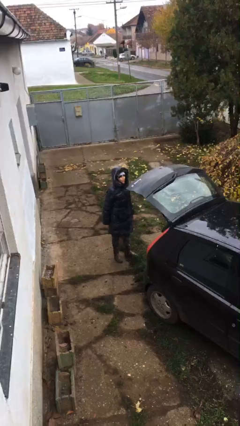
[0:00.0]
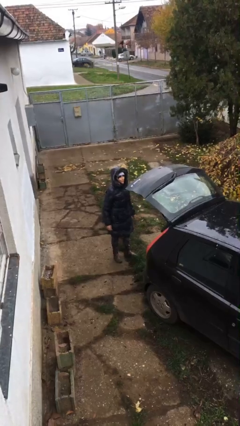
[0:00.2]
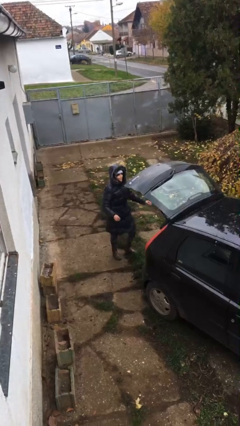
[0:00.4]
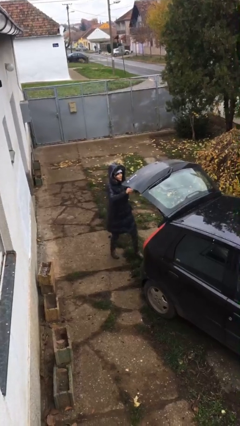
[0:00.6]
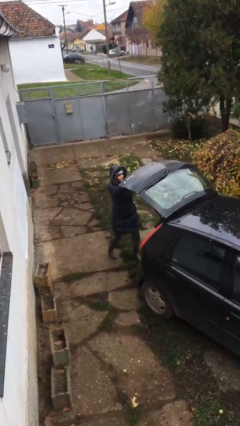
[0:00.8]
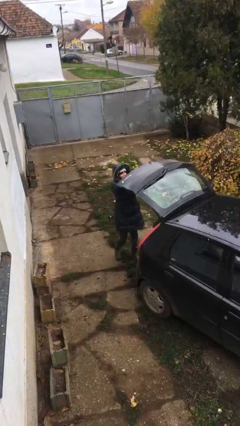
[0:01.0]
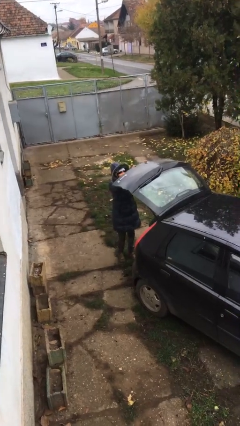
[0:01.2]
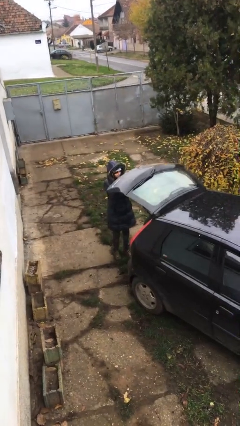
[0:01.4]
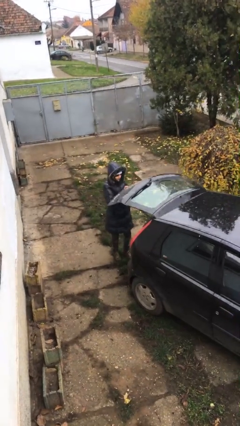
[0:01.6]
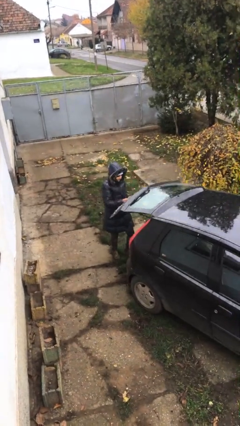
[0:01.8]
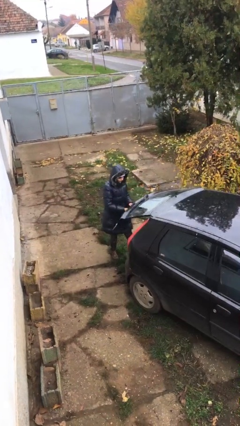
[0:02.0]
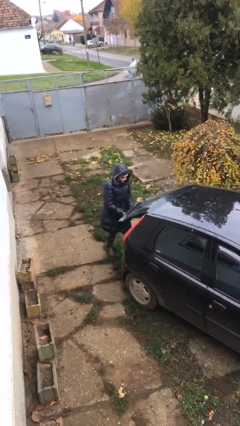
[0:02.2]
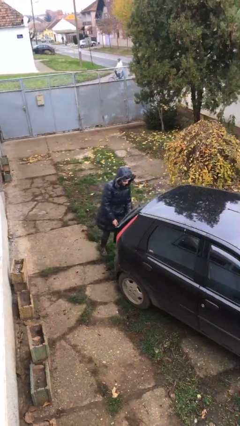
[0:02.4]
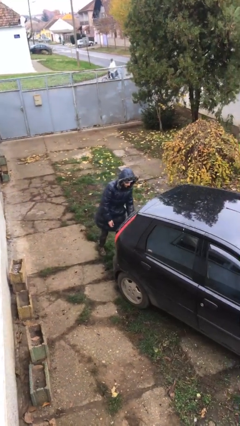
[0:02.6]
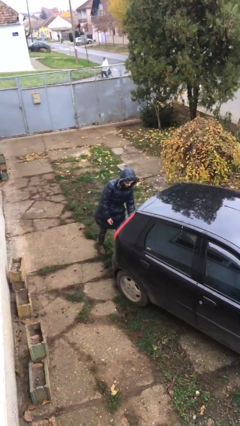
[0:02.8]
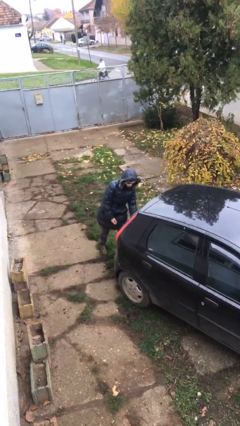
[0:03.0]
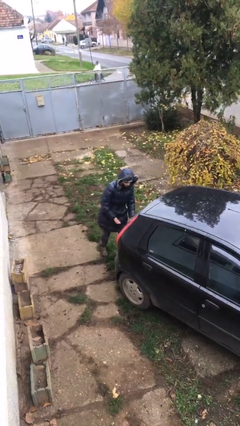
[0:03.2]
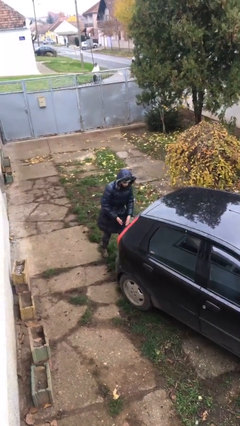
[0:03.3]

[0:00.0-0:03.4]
person closes car trunk

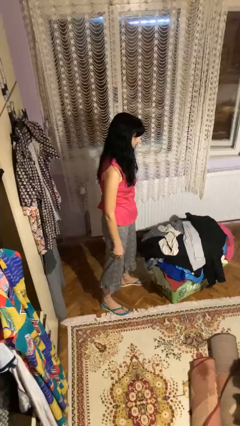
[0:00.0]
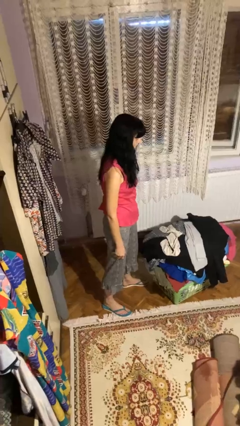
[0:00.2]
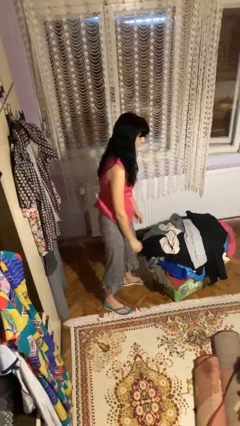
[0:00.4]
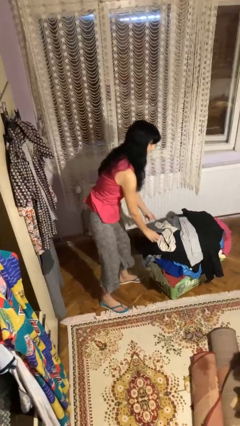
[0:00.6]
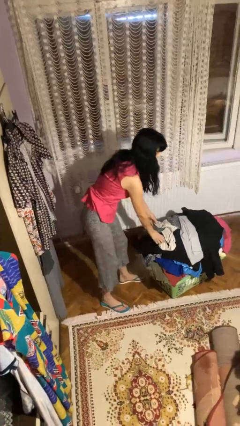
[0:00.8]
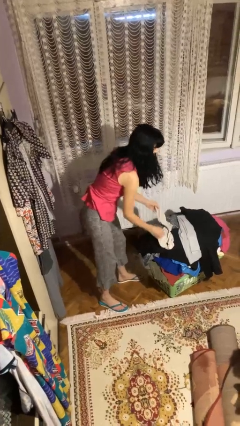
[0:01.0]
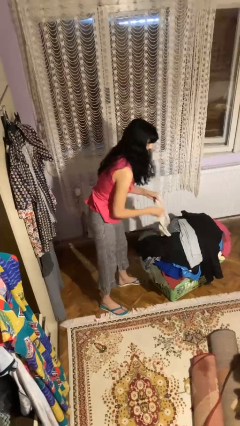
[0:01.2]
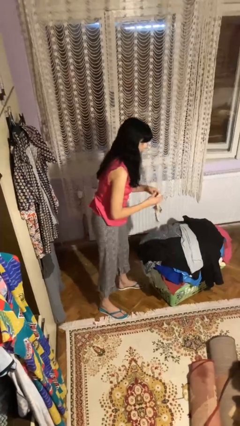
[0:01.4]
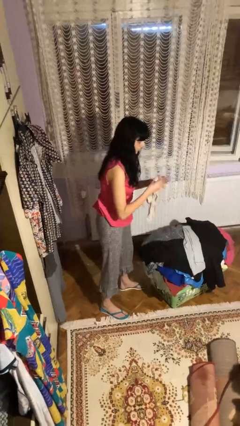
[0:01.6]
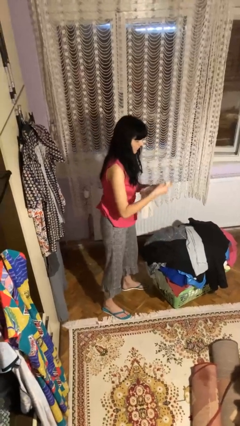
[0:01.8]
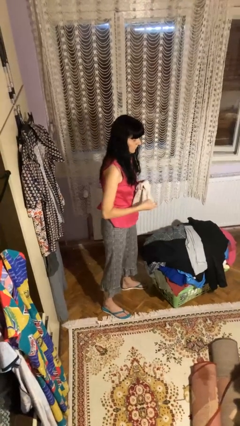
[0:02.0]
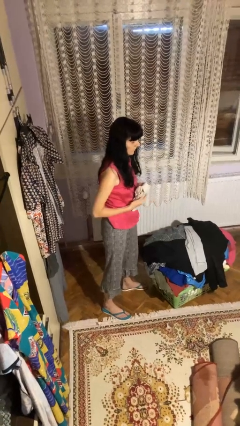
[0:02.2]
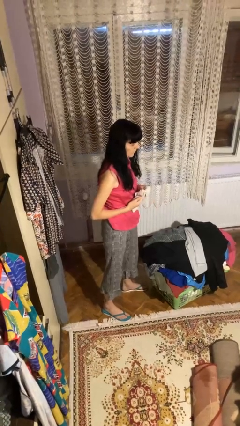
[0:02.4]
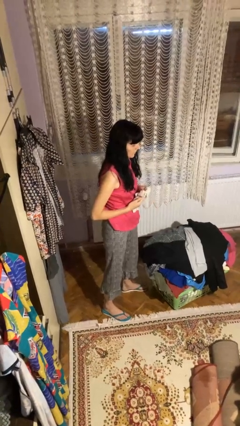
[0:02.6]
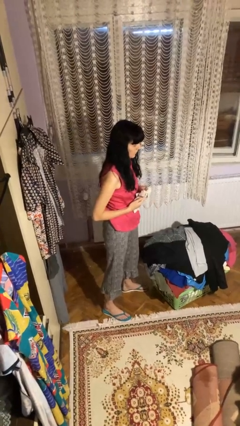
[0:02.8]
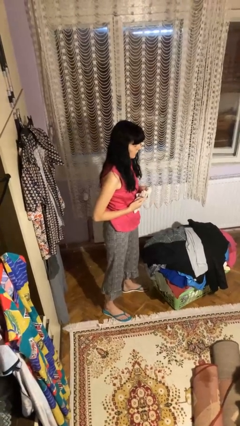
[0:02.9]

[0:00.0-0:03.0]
person folds socks

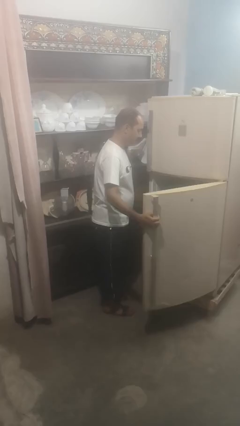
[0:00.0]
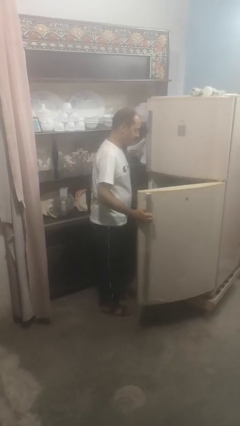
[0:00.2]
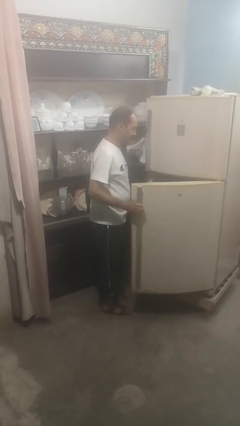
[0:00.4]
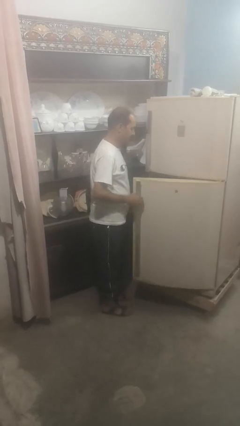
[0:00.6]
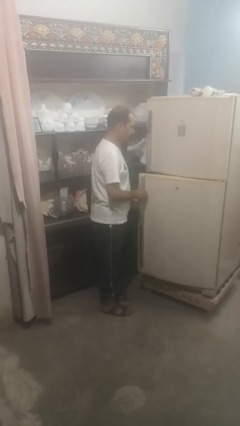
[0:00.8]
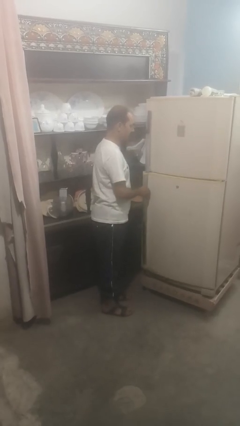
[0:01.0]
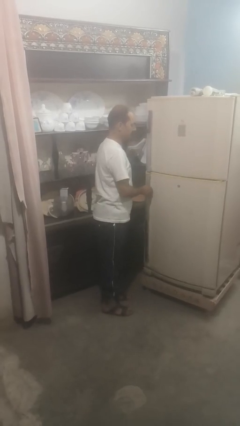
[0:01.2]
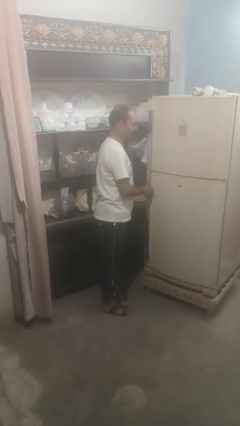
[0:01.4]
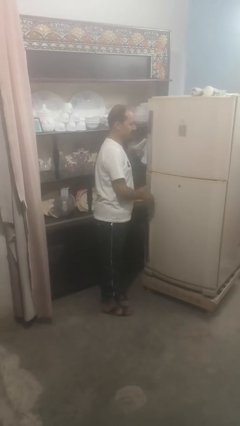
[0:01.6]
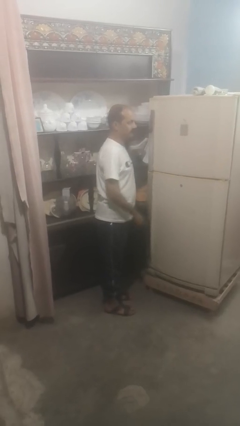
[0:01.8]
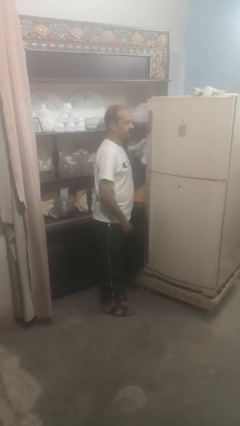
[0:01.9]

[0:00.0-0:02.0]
person closes refrigerator

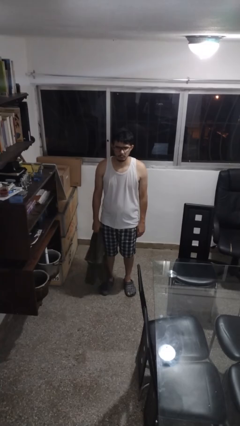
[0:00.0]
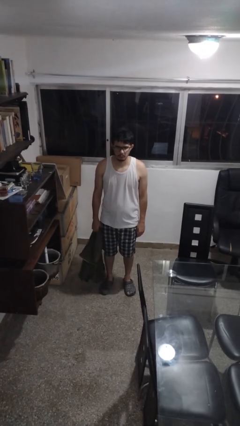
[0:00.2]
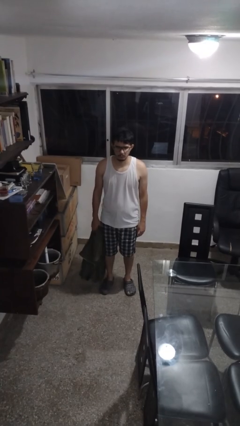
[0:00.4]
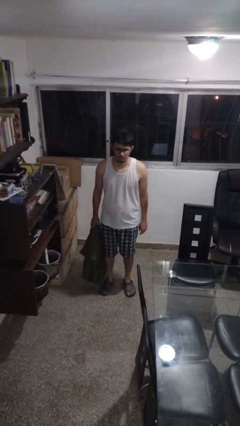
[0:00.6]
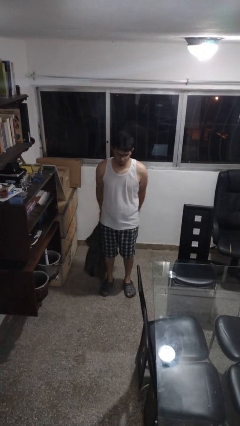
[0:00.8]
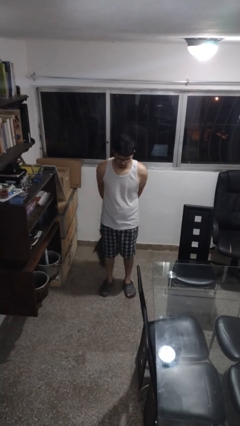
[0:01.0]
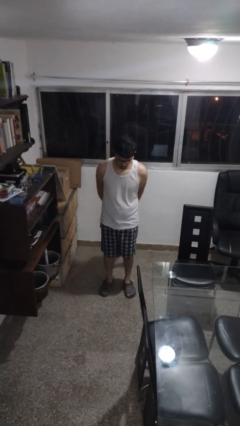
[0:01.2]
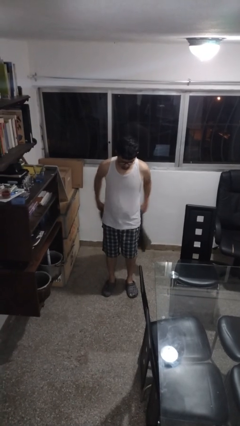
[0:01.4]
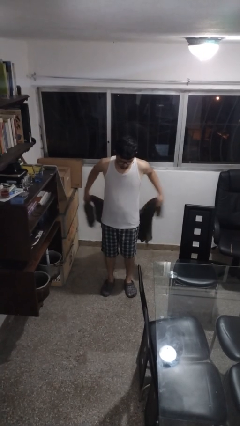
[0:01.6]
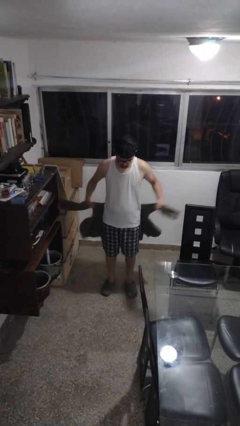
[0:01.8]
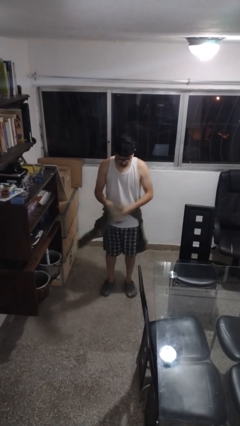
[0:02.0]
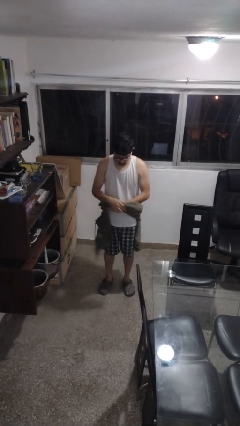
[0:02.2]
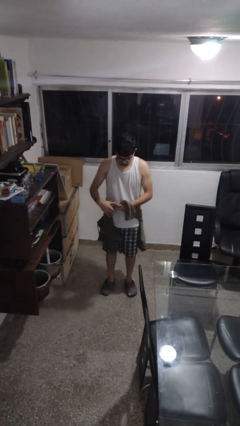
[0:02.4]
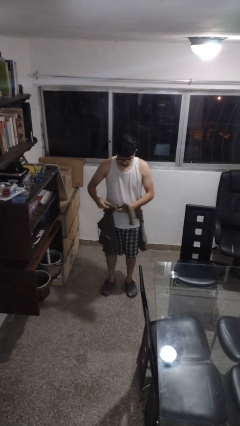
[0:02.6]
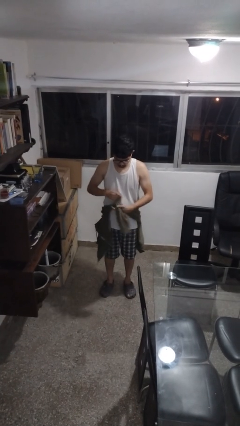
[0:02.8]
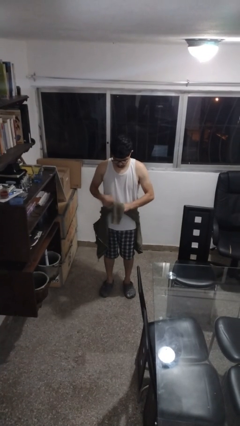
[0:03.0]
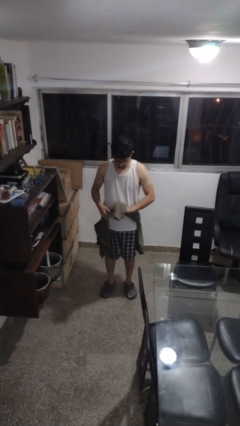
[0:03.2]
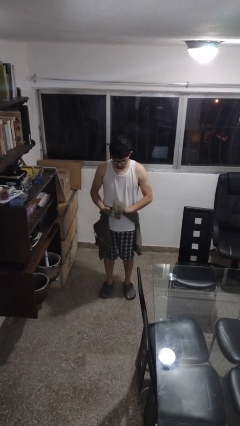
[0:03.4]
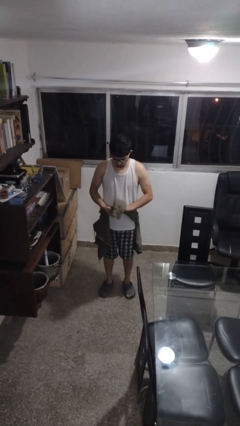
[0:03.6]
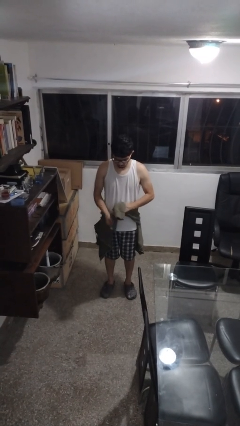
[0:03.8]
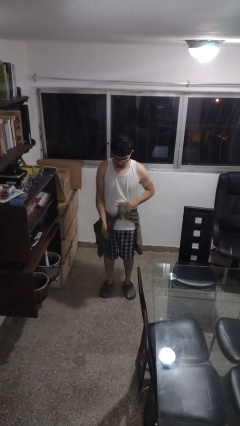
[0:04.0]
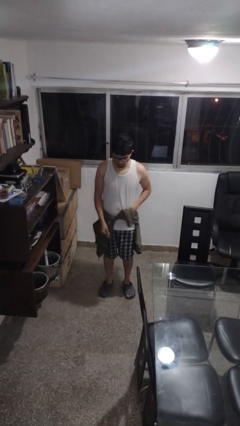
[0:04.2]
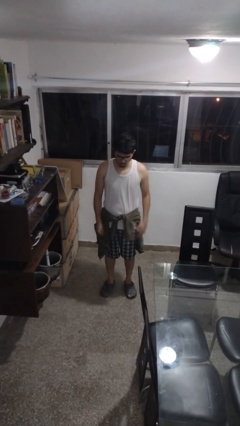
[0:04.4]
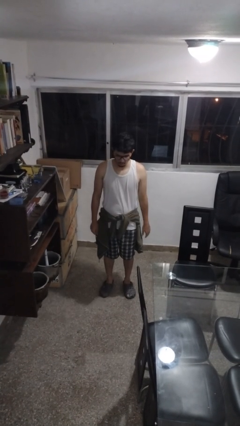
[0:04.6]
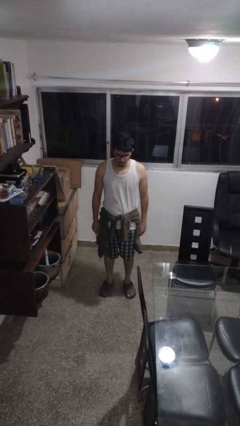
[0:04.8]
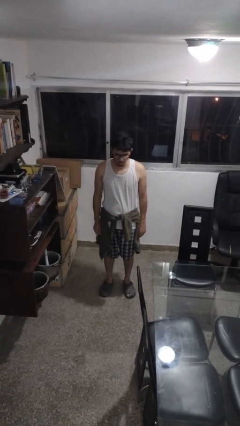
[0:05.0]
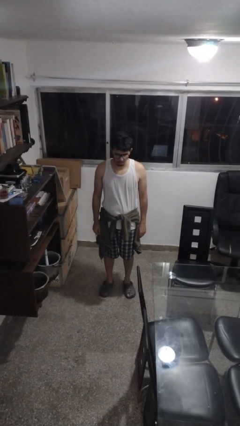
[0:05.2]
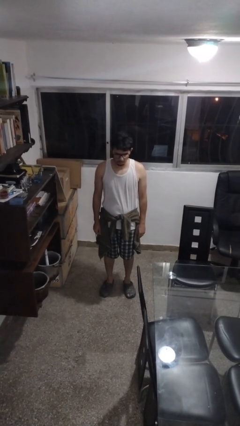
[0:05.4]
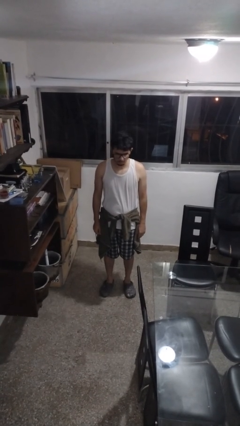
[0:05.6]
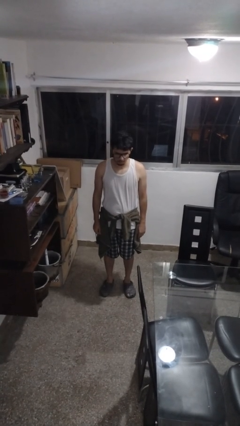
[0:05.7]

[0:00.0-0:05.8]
person ties jacket around waist

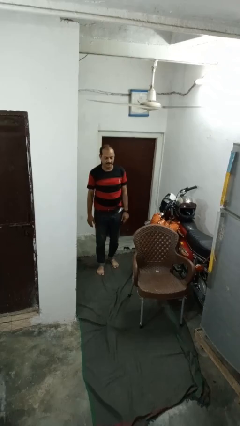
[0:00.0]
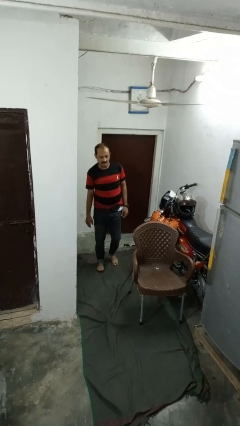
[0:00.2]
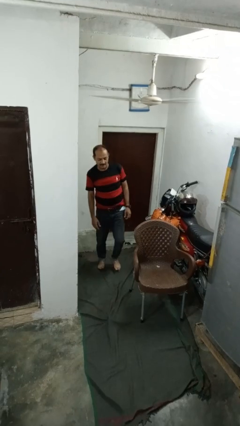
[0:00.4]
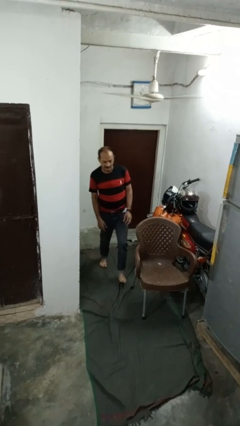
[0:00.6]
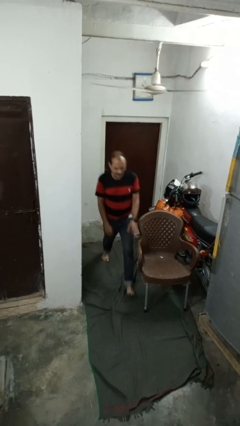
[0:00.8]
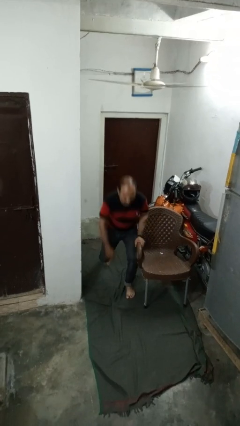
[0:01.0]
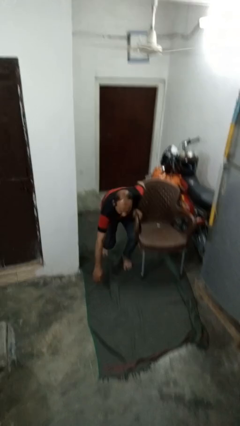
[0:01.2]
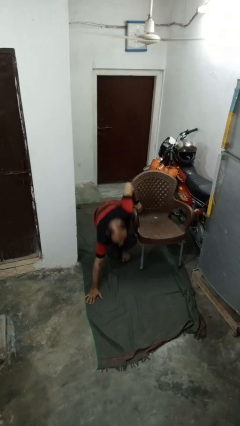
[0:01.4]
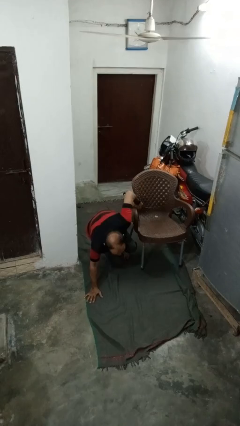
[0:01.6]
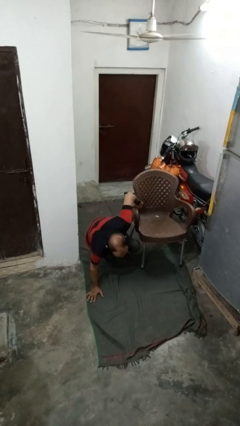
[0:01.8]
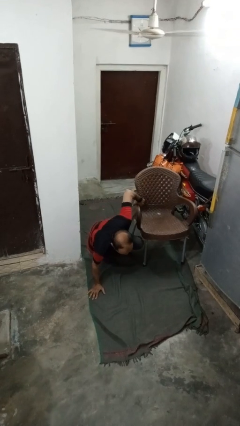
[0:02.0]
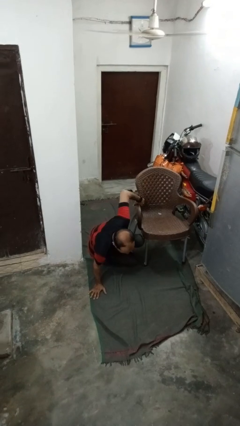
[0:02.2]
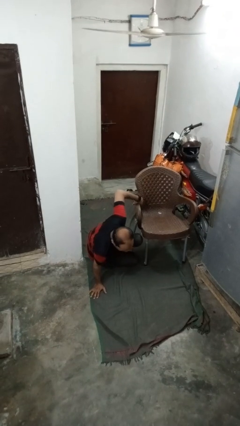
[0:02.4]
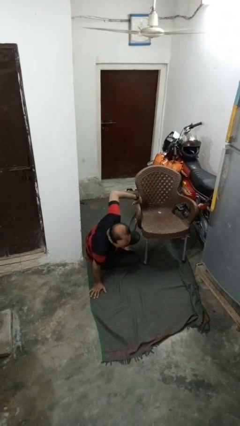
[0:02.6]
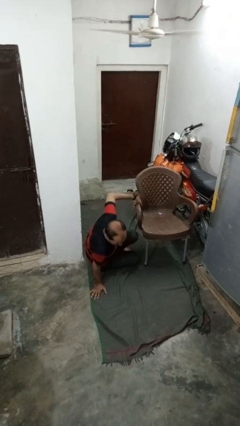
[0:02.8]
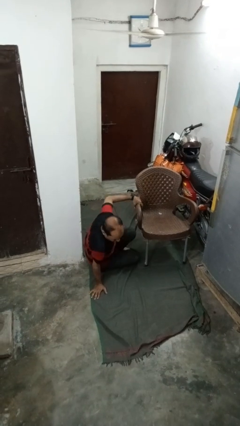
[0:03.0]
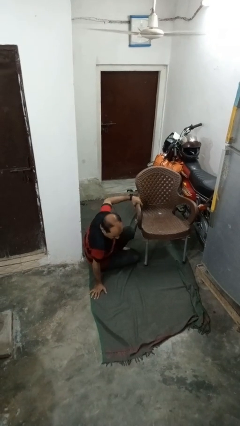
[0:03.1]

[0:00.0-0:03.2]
person trips on object on floor

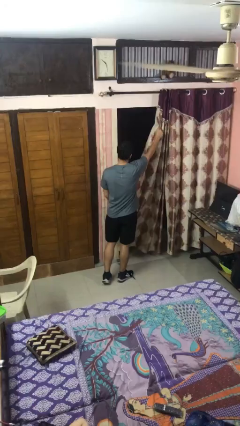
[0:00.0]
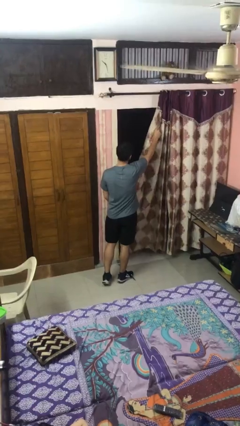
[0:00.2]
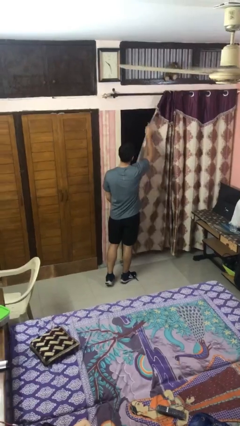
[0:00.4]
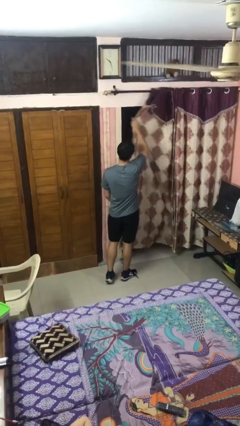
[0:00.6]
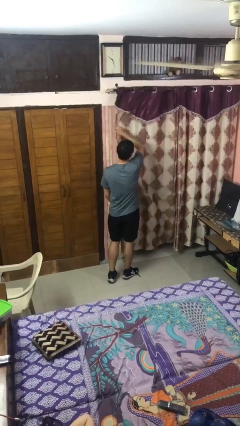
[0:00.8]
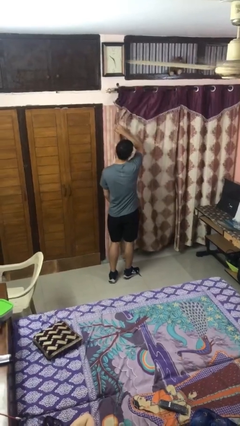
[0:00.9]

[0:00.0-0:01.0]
person closes curtains
